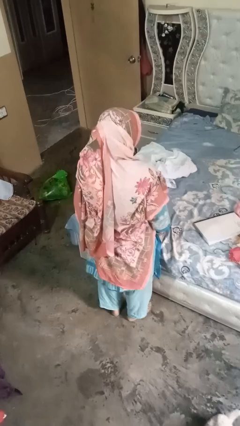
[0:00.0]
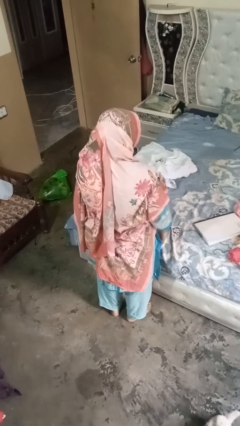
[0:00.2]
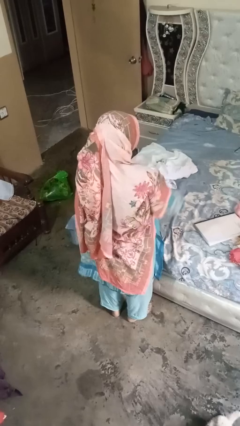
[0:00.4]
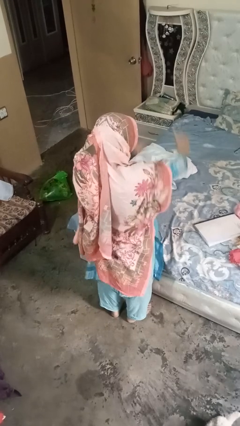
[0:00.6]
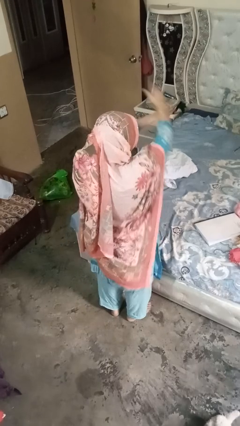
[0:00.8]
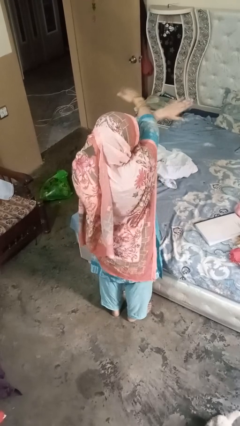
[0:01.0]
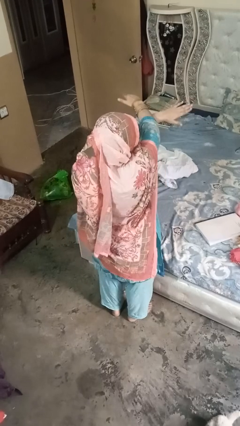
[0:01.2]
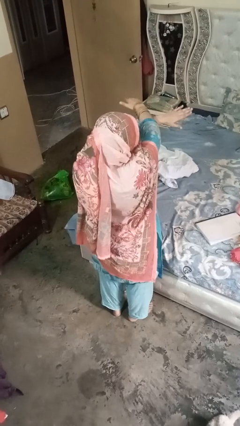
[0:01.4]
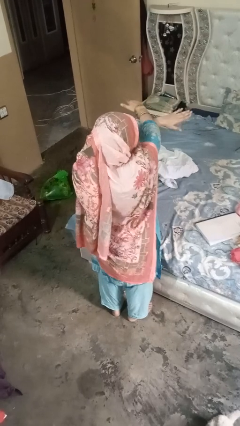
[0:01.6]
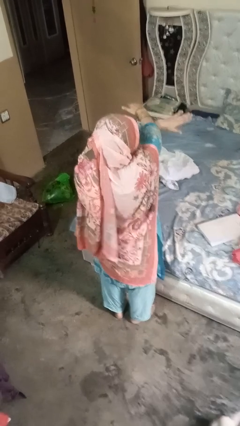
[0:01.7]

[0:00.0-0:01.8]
person gestures arms x

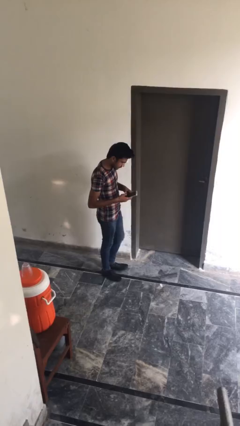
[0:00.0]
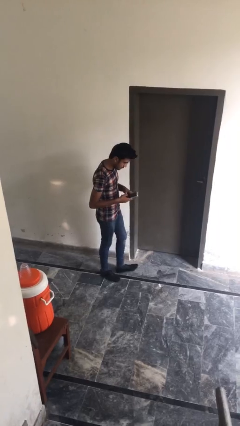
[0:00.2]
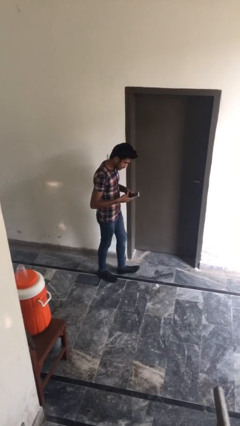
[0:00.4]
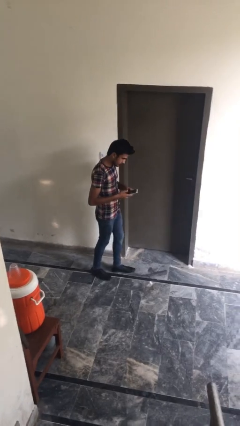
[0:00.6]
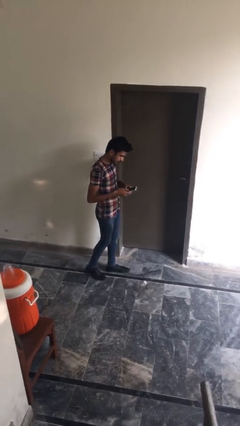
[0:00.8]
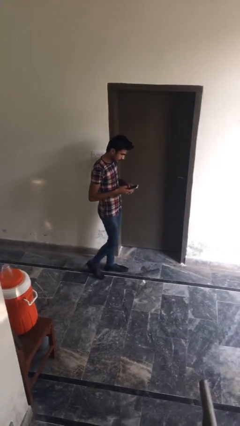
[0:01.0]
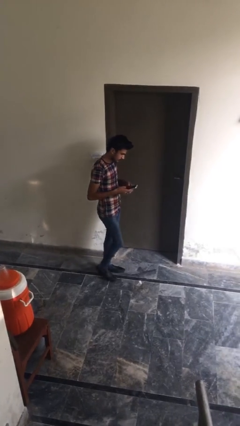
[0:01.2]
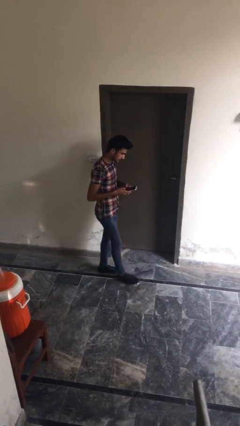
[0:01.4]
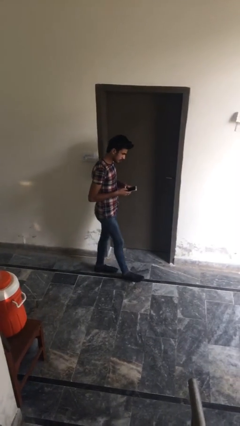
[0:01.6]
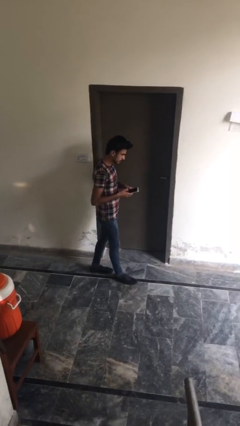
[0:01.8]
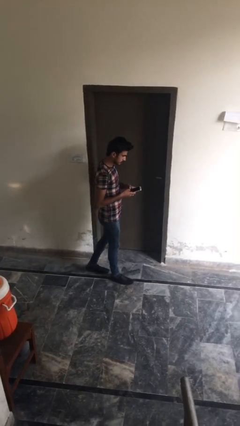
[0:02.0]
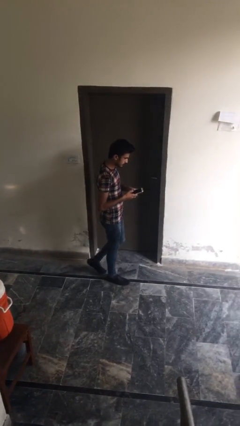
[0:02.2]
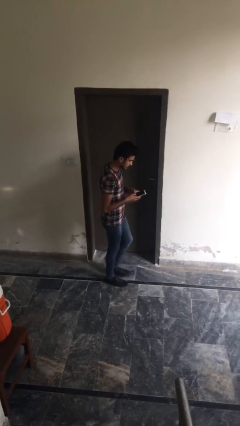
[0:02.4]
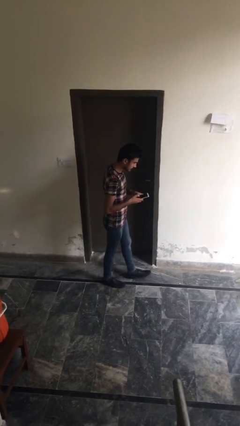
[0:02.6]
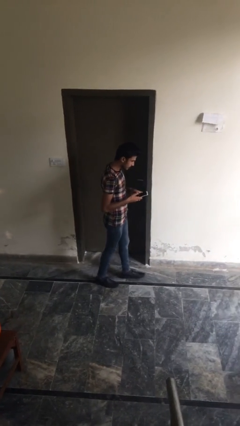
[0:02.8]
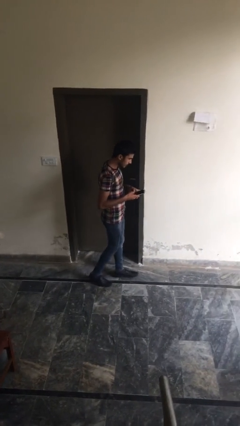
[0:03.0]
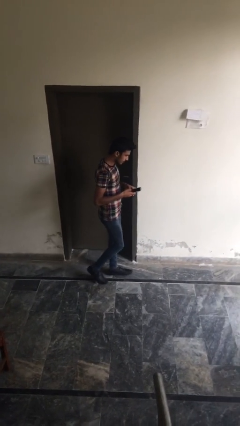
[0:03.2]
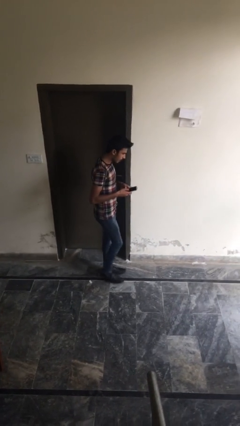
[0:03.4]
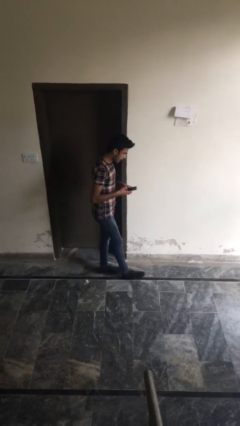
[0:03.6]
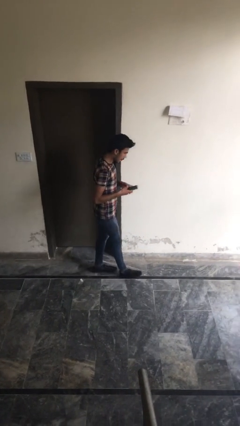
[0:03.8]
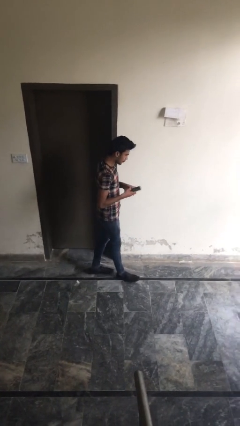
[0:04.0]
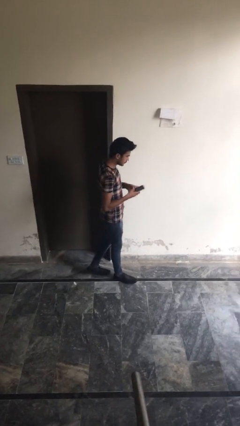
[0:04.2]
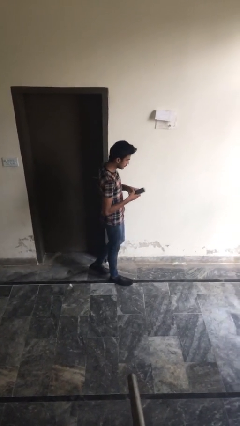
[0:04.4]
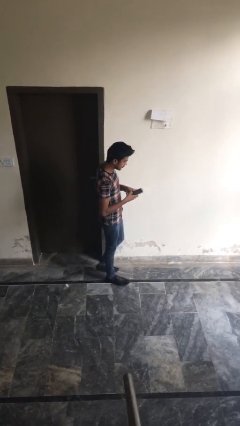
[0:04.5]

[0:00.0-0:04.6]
person texts on phone

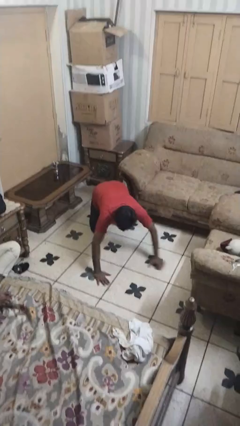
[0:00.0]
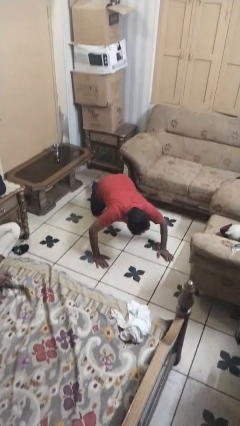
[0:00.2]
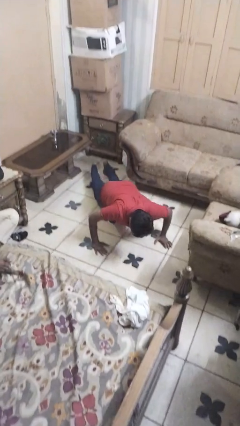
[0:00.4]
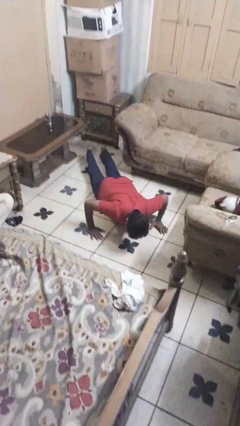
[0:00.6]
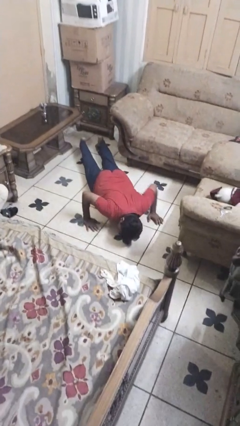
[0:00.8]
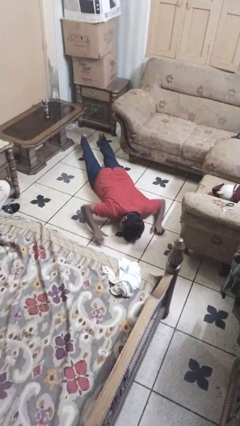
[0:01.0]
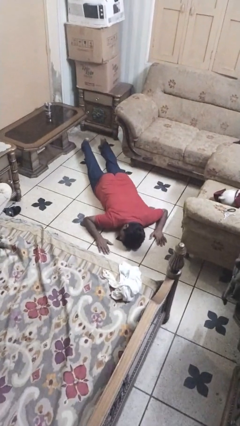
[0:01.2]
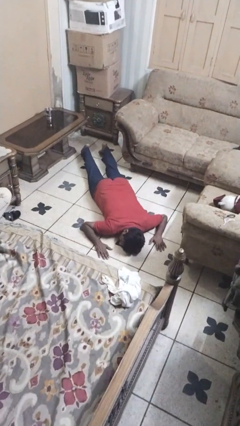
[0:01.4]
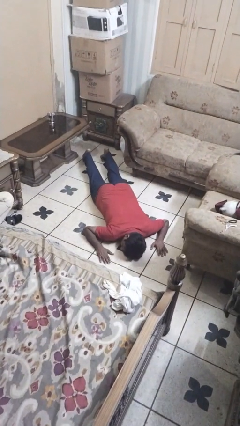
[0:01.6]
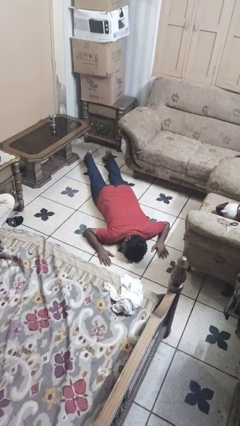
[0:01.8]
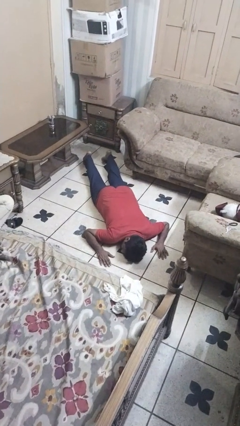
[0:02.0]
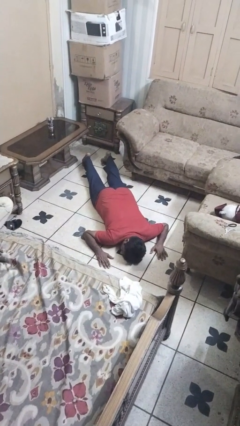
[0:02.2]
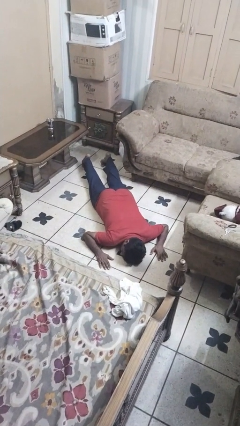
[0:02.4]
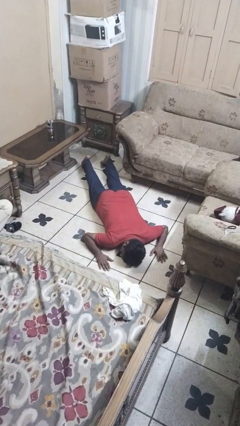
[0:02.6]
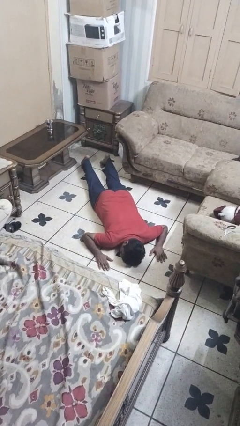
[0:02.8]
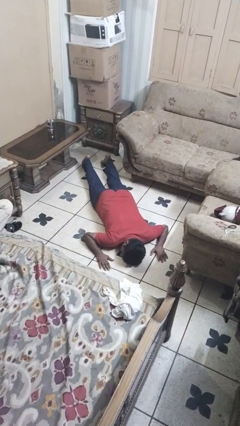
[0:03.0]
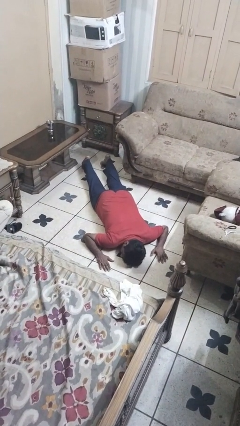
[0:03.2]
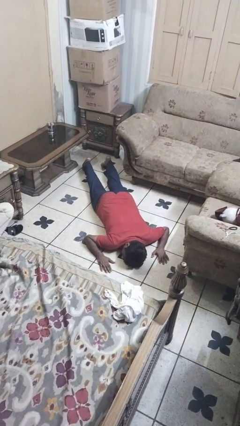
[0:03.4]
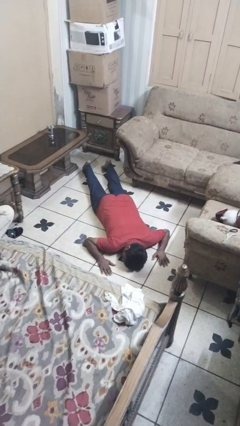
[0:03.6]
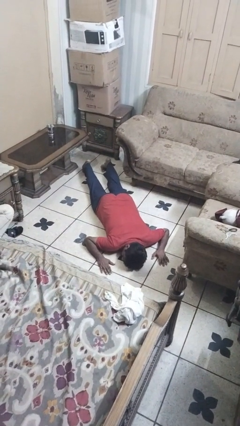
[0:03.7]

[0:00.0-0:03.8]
person lies down on floor

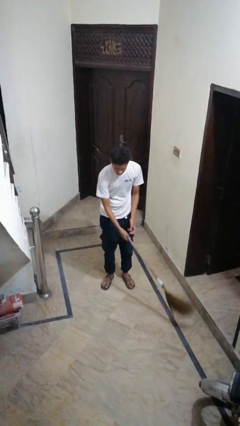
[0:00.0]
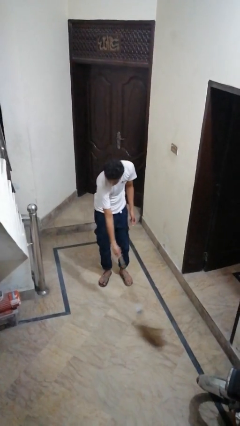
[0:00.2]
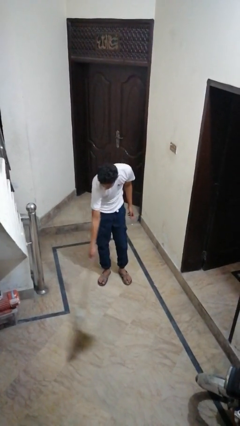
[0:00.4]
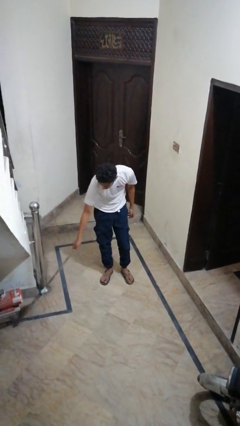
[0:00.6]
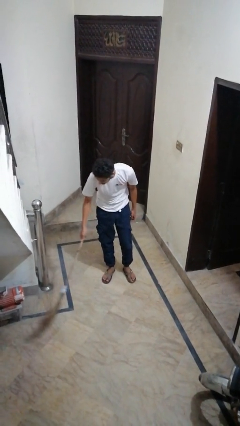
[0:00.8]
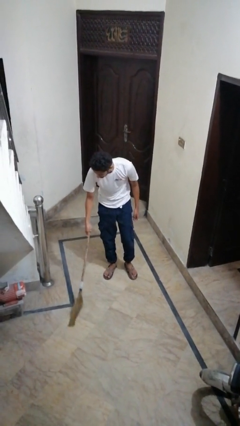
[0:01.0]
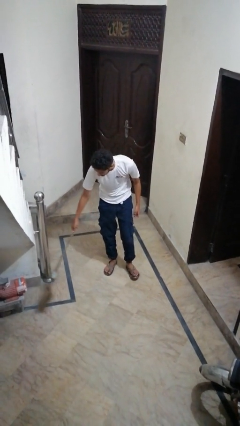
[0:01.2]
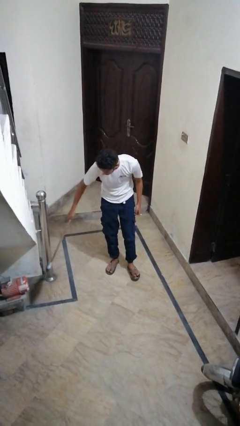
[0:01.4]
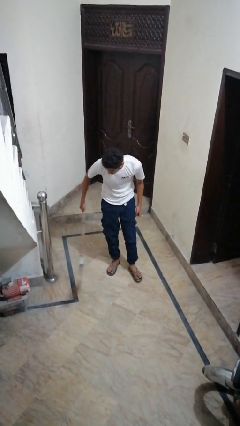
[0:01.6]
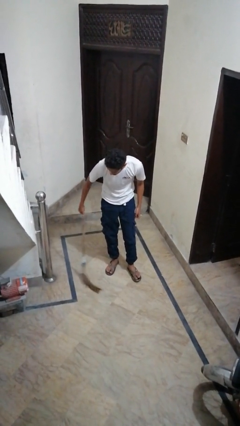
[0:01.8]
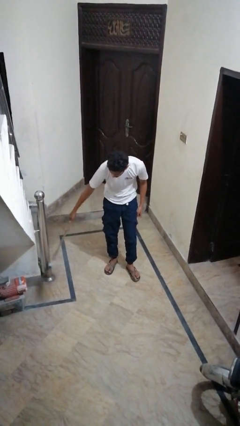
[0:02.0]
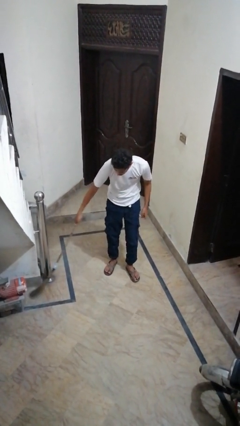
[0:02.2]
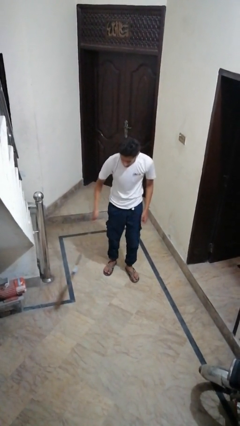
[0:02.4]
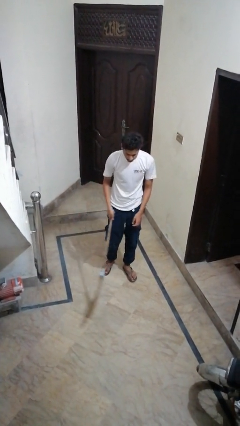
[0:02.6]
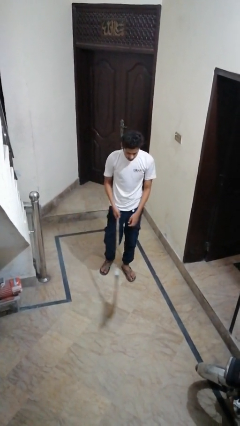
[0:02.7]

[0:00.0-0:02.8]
person sweeps floor

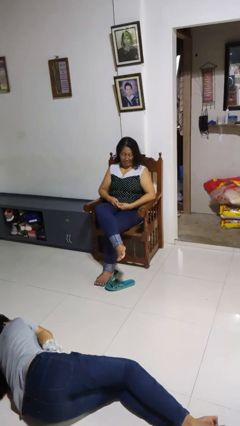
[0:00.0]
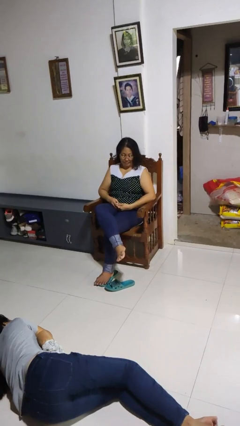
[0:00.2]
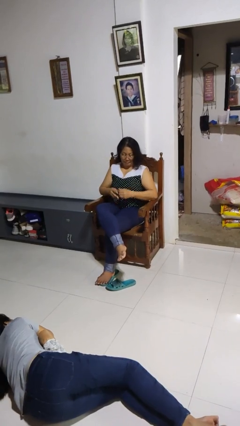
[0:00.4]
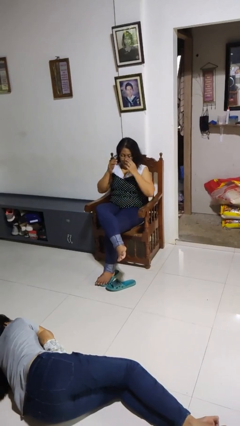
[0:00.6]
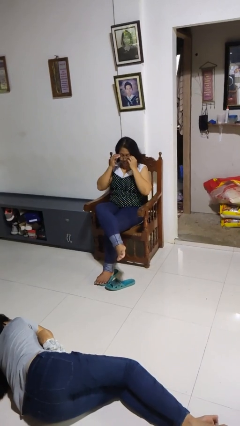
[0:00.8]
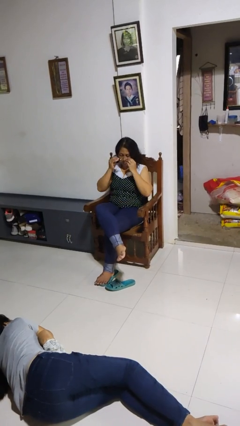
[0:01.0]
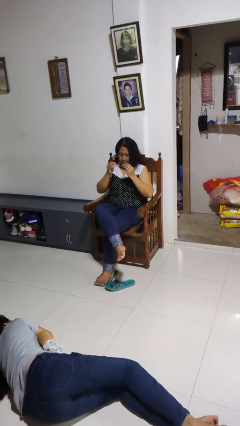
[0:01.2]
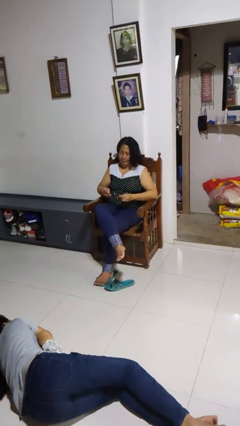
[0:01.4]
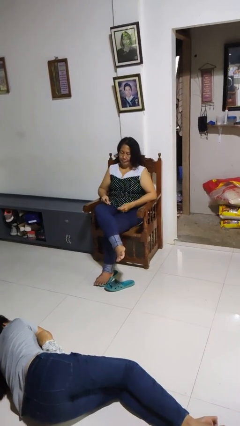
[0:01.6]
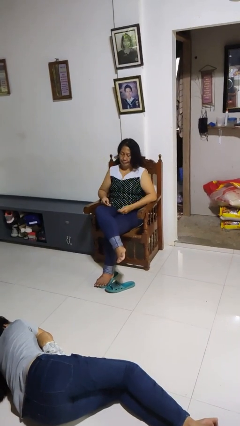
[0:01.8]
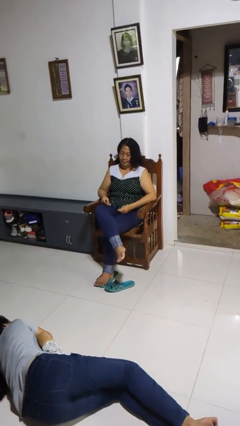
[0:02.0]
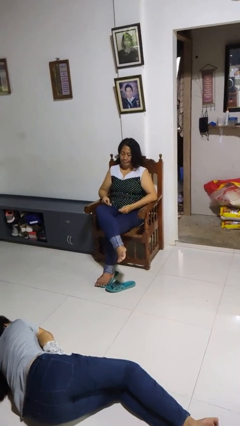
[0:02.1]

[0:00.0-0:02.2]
person takes off glasses

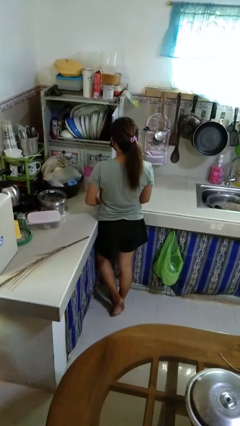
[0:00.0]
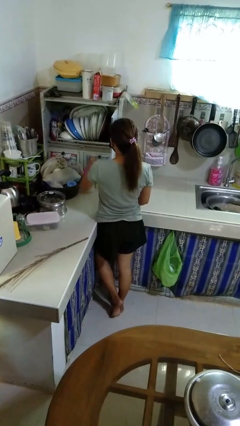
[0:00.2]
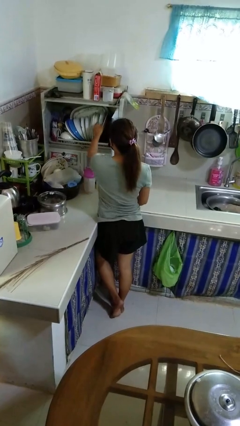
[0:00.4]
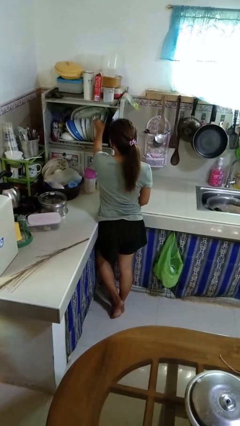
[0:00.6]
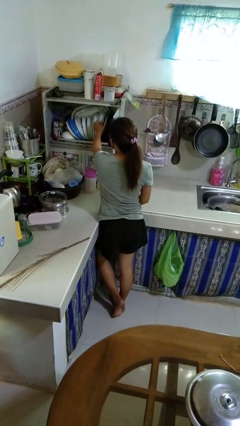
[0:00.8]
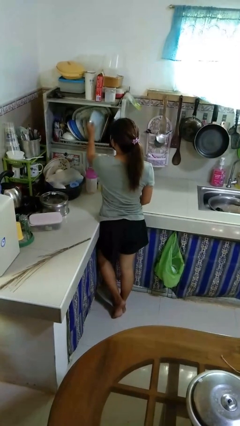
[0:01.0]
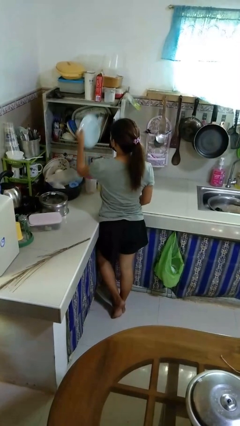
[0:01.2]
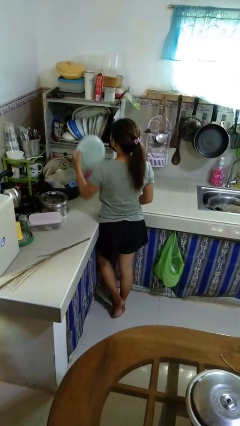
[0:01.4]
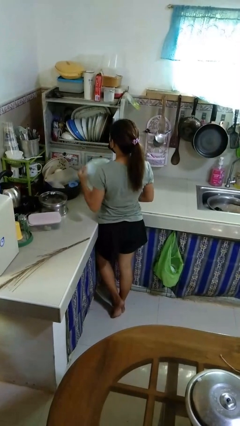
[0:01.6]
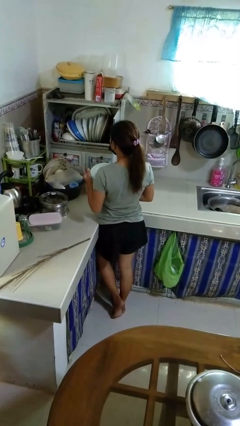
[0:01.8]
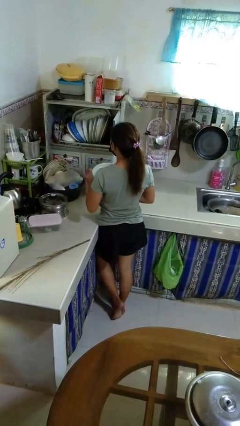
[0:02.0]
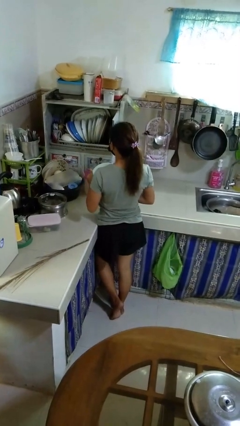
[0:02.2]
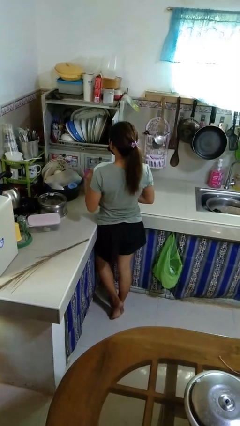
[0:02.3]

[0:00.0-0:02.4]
person takes object from kitchen drawer
